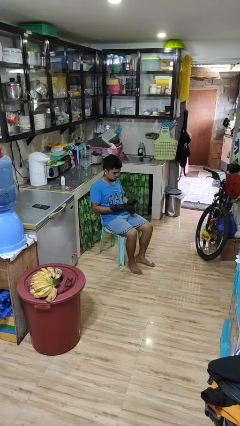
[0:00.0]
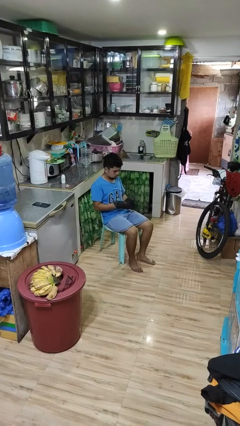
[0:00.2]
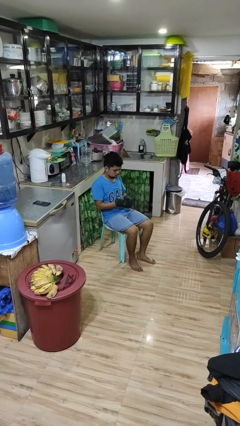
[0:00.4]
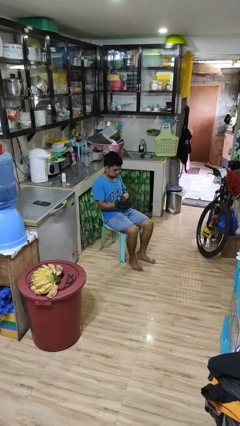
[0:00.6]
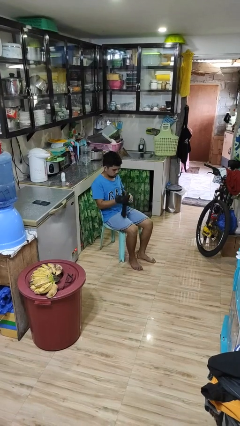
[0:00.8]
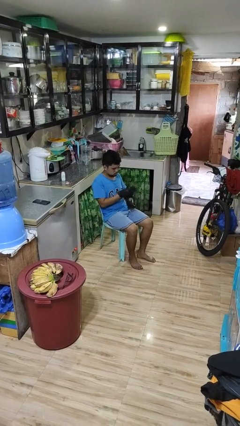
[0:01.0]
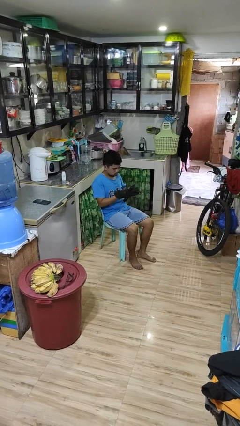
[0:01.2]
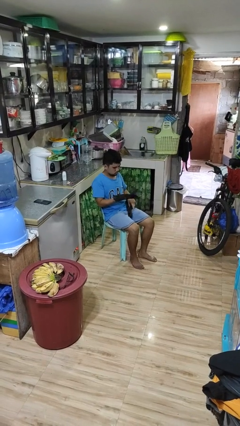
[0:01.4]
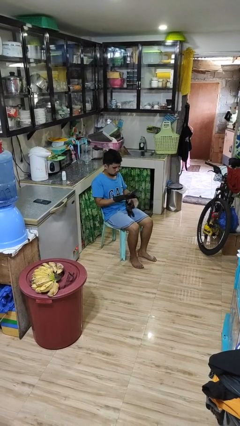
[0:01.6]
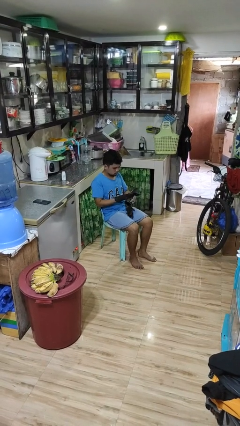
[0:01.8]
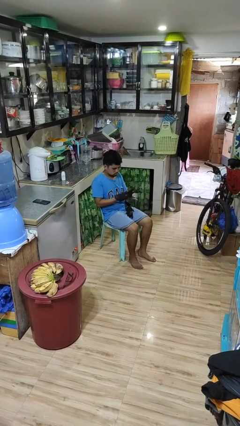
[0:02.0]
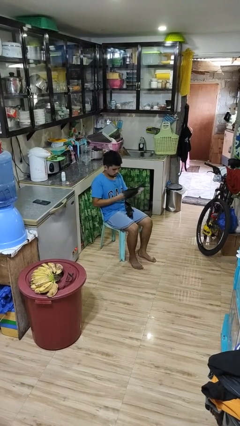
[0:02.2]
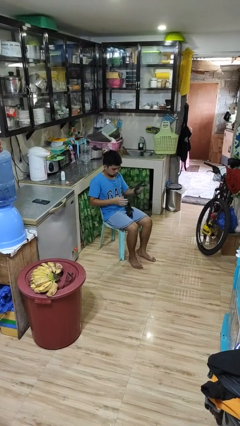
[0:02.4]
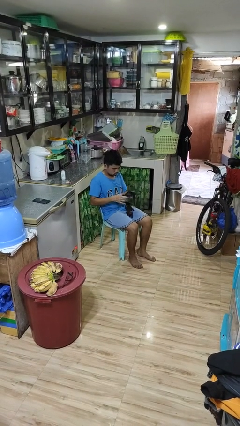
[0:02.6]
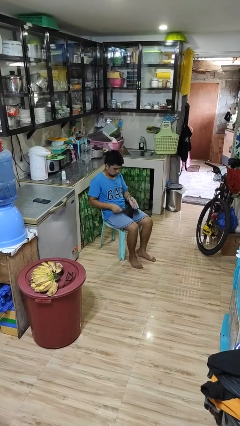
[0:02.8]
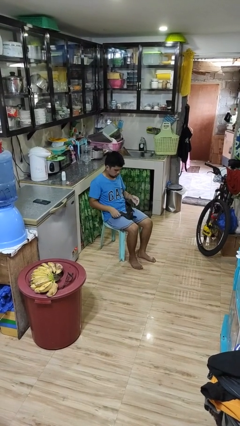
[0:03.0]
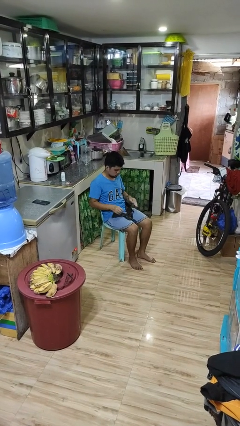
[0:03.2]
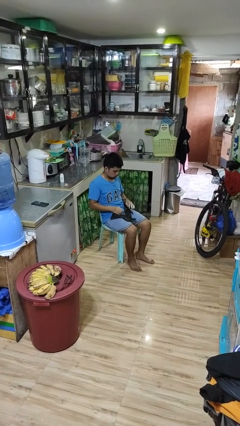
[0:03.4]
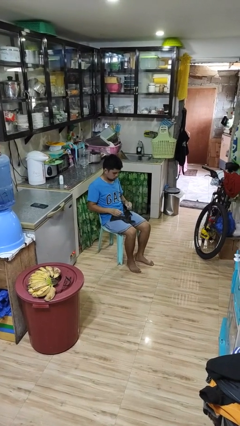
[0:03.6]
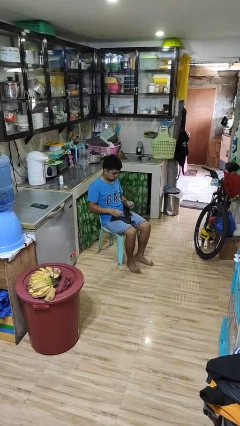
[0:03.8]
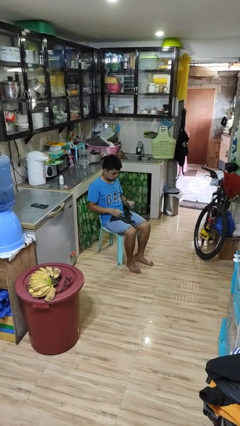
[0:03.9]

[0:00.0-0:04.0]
person takes off gloves

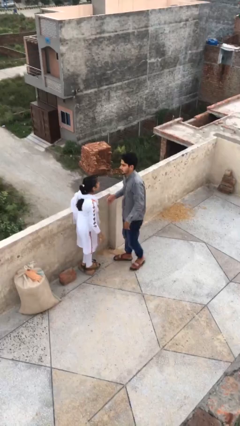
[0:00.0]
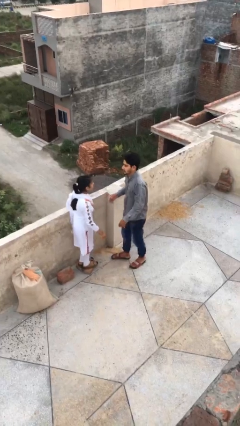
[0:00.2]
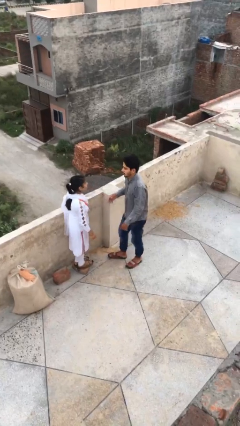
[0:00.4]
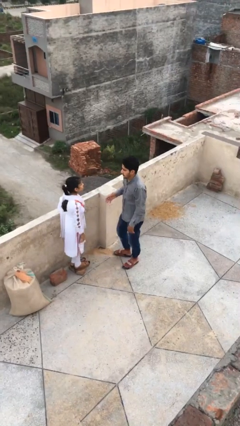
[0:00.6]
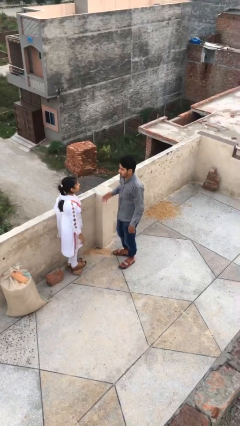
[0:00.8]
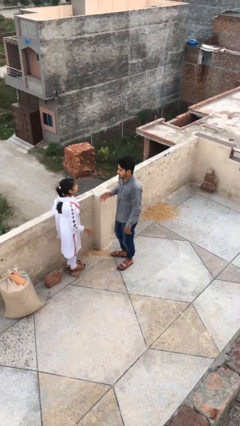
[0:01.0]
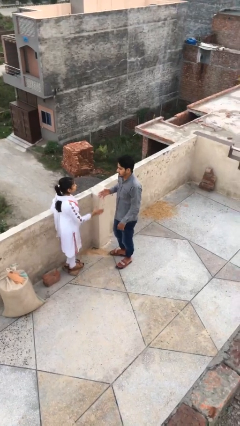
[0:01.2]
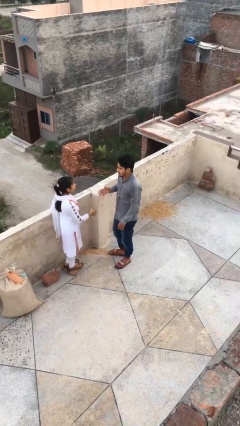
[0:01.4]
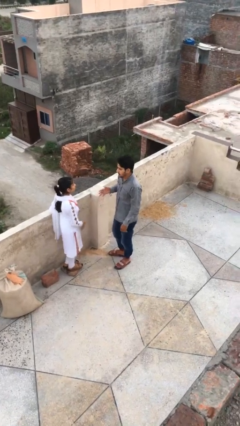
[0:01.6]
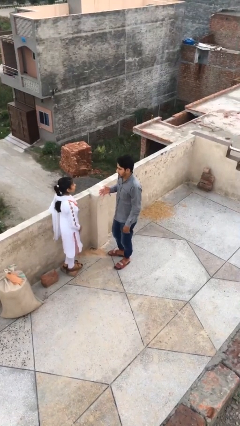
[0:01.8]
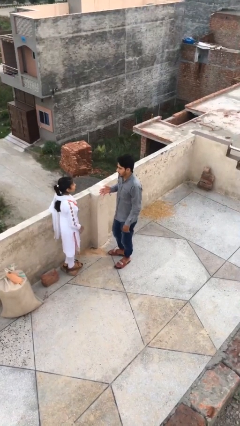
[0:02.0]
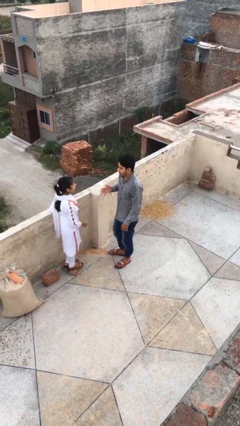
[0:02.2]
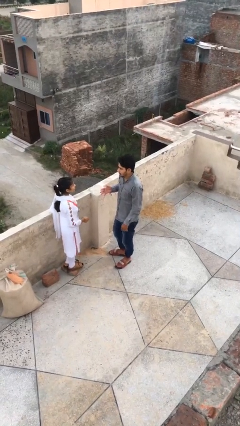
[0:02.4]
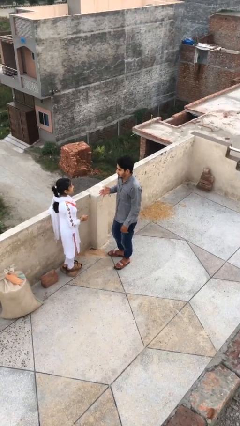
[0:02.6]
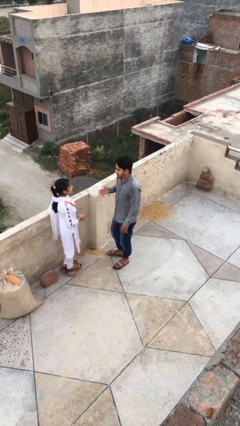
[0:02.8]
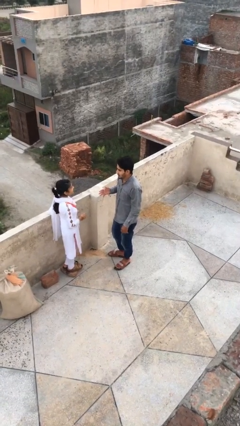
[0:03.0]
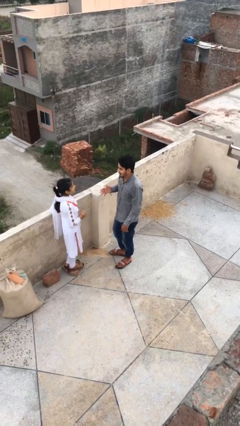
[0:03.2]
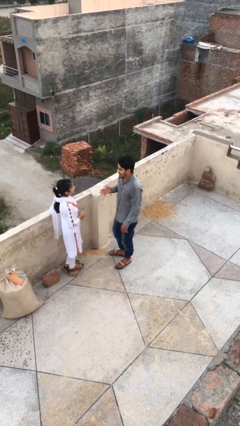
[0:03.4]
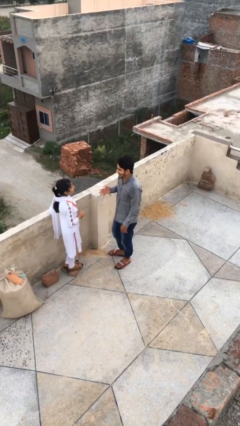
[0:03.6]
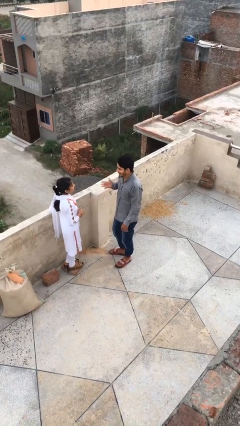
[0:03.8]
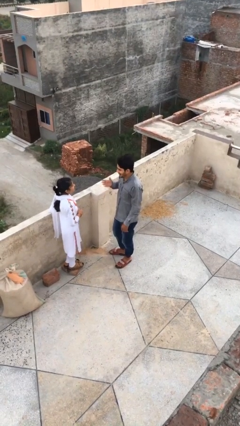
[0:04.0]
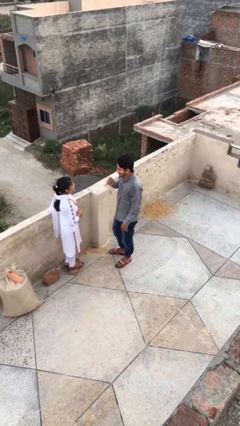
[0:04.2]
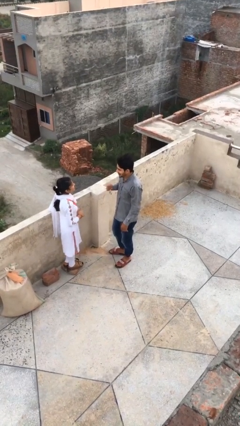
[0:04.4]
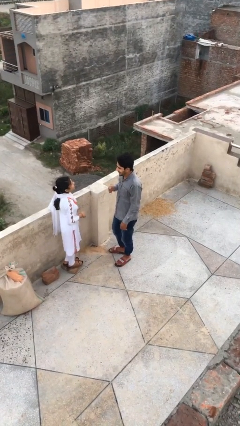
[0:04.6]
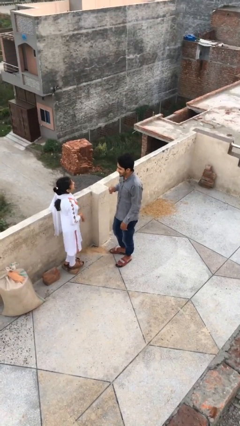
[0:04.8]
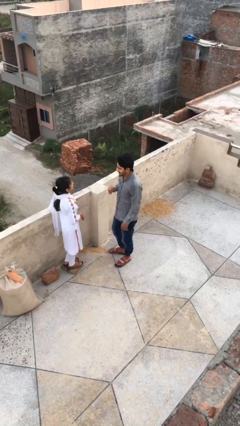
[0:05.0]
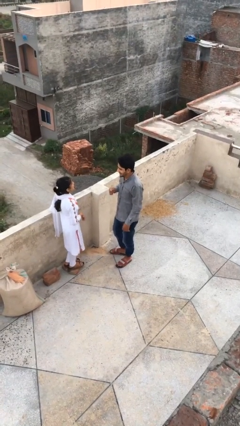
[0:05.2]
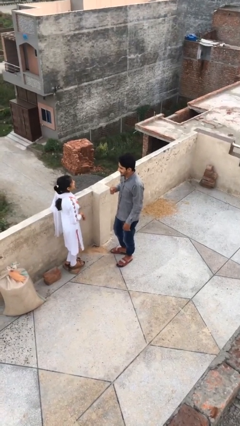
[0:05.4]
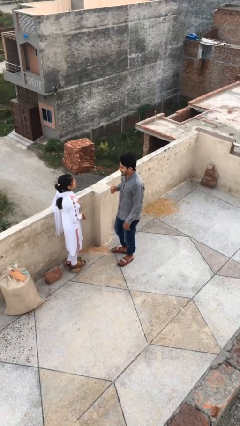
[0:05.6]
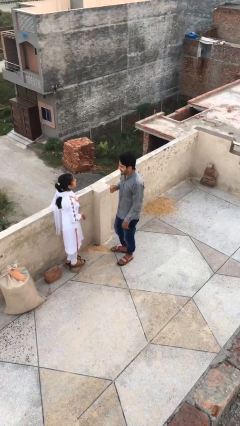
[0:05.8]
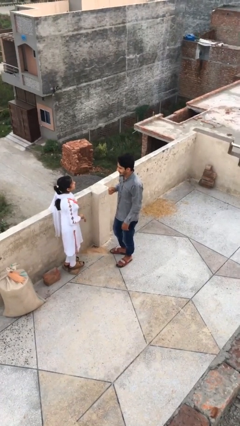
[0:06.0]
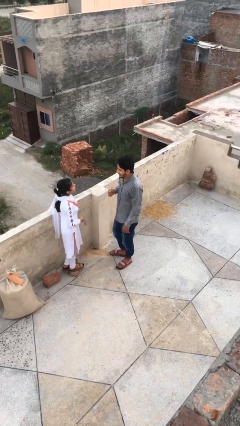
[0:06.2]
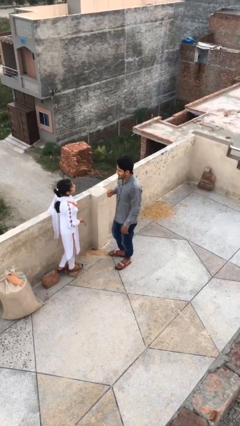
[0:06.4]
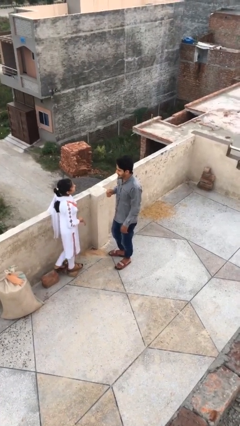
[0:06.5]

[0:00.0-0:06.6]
person talks to person

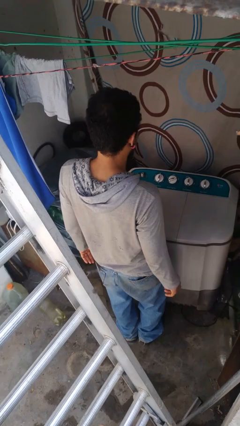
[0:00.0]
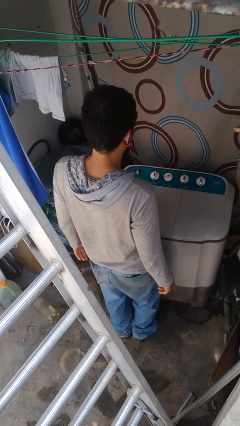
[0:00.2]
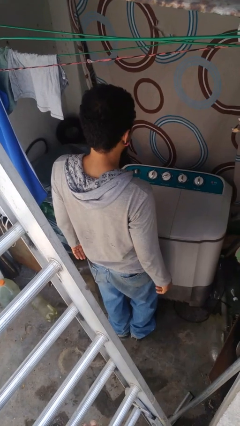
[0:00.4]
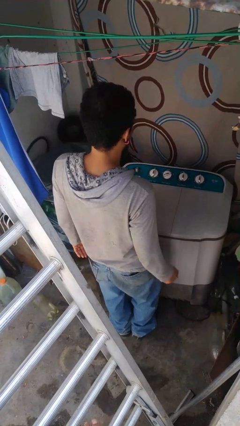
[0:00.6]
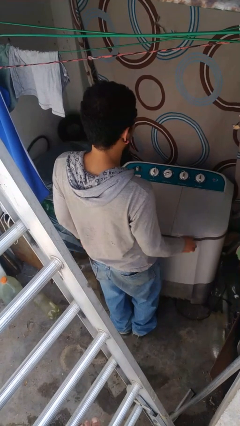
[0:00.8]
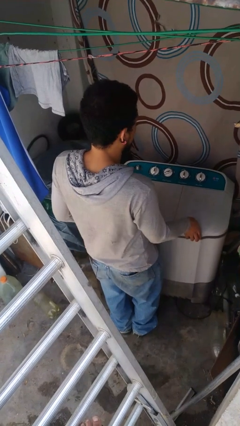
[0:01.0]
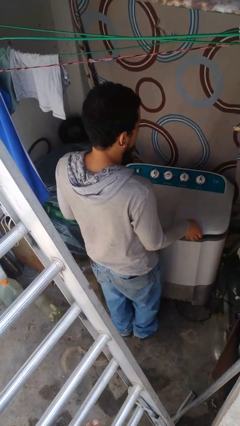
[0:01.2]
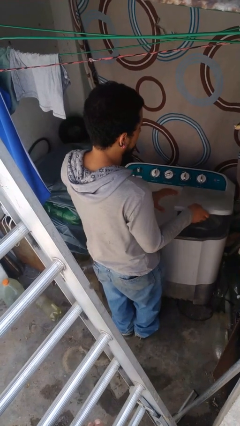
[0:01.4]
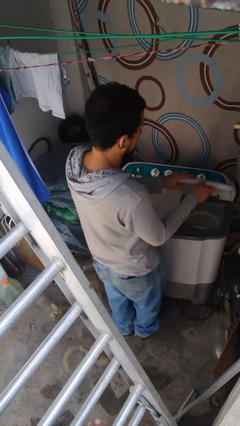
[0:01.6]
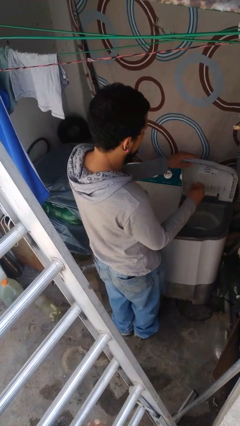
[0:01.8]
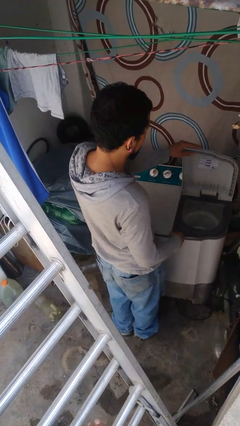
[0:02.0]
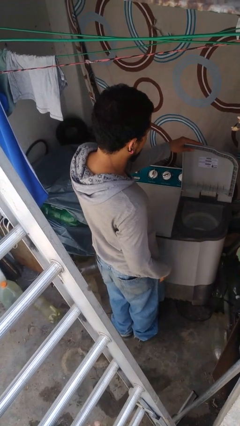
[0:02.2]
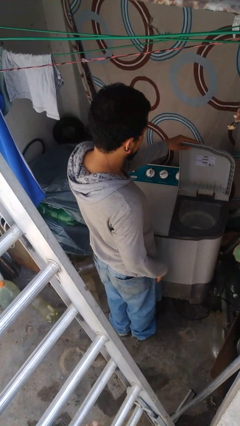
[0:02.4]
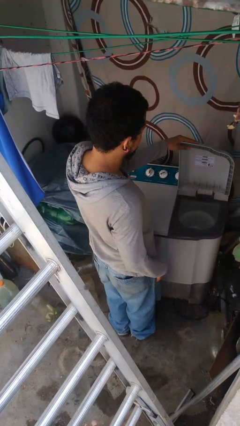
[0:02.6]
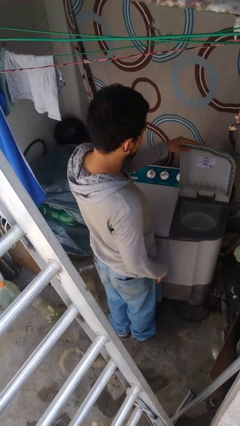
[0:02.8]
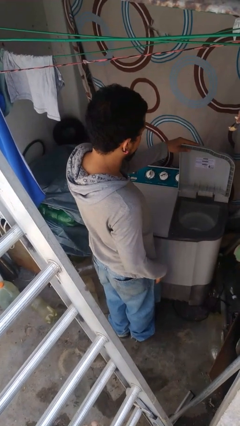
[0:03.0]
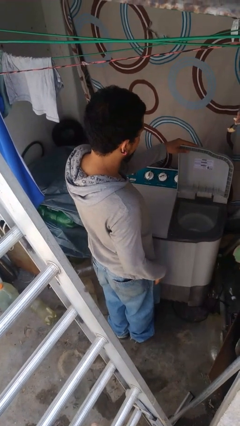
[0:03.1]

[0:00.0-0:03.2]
person opens clothes washer

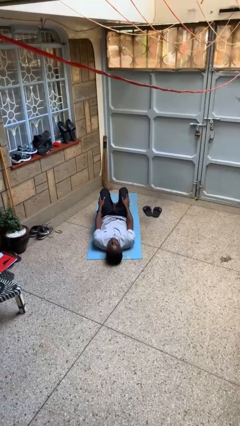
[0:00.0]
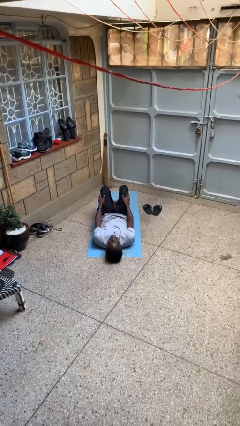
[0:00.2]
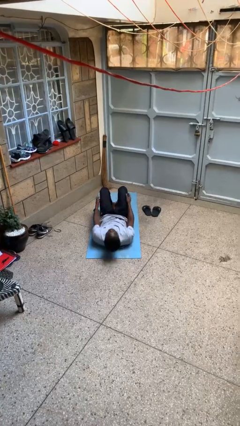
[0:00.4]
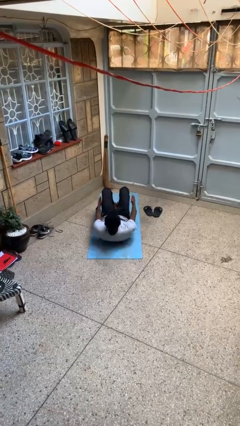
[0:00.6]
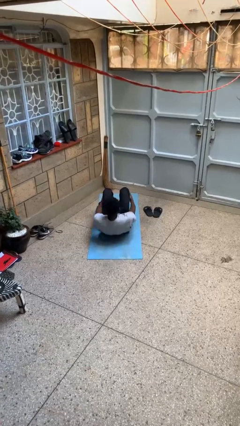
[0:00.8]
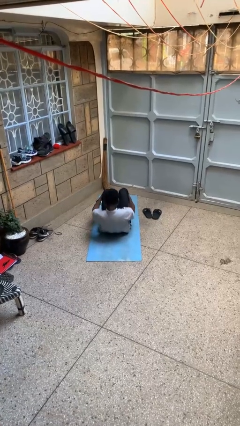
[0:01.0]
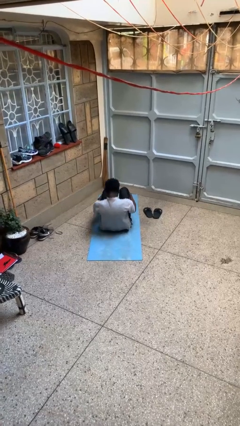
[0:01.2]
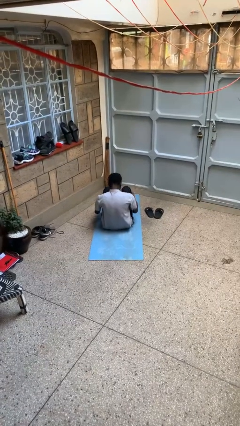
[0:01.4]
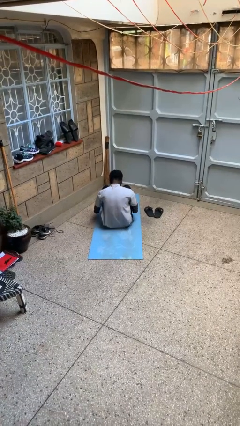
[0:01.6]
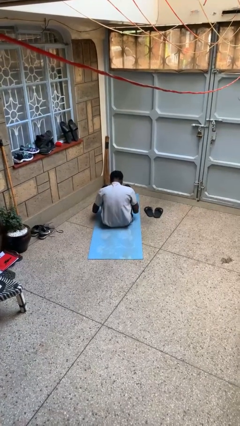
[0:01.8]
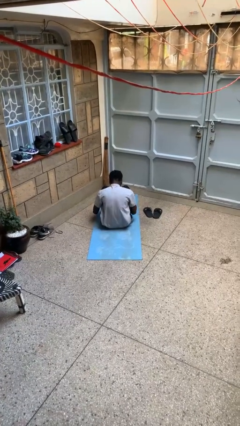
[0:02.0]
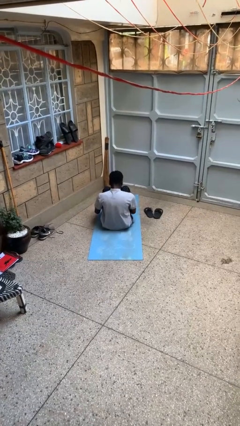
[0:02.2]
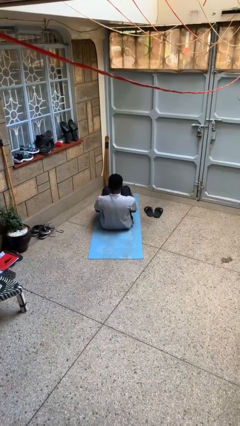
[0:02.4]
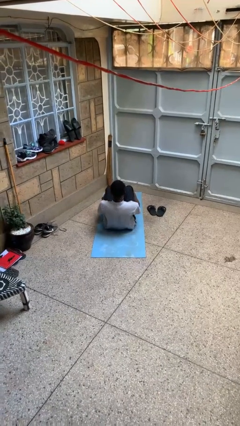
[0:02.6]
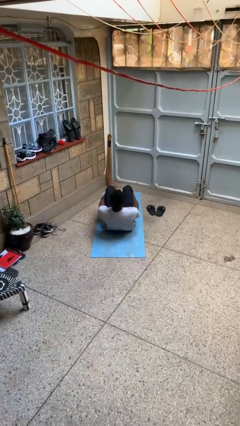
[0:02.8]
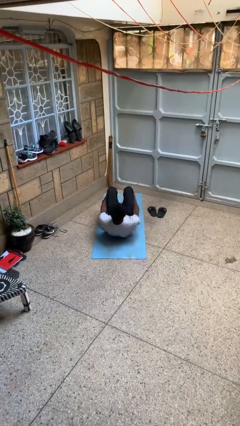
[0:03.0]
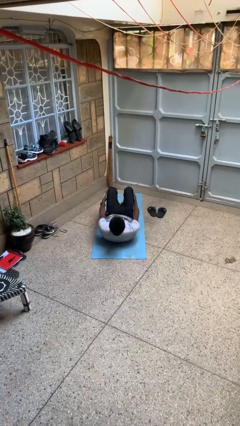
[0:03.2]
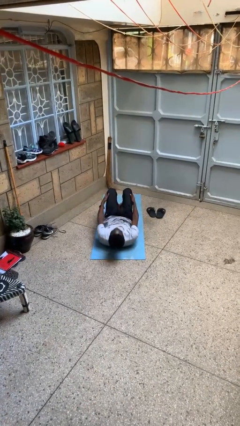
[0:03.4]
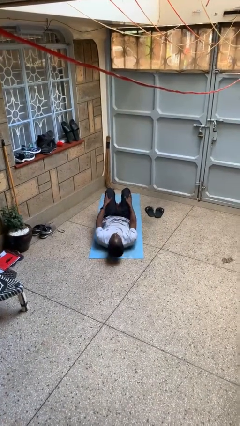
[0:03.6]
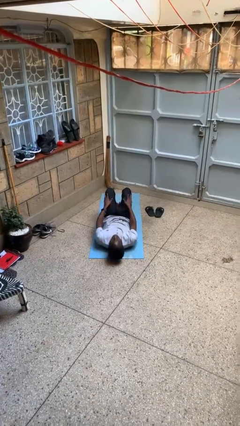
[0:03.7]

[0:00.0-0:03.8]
person exercises with situp
